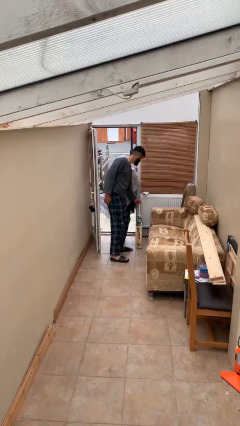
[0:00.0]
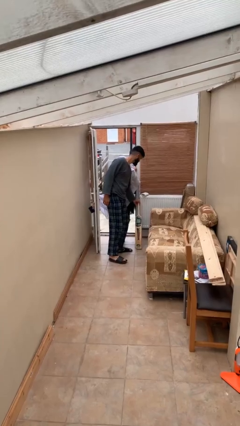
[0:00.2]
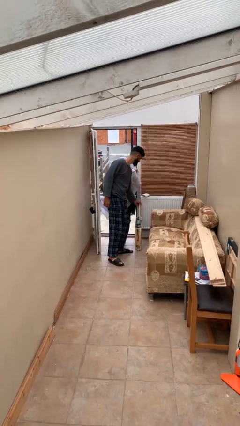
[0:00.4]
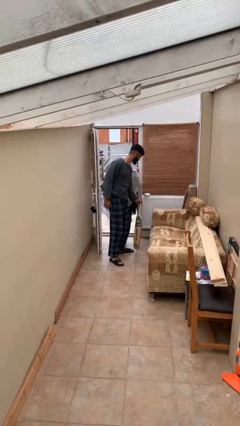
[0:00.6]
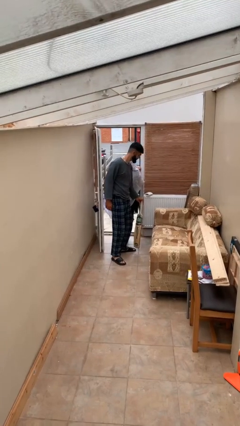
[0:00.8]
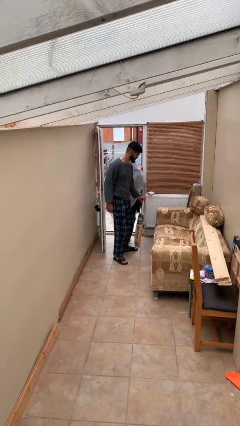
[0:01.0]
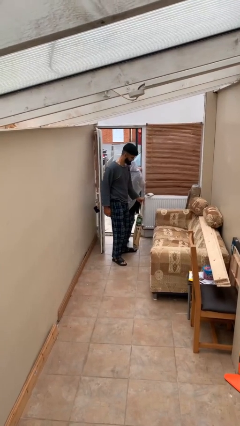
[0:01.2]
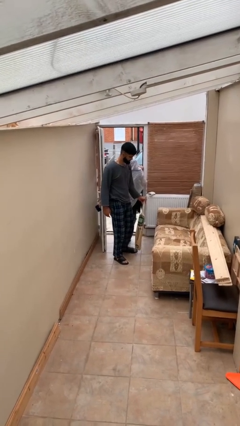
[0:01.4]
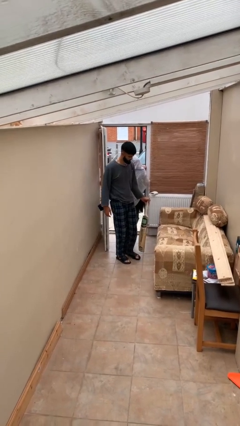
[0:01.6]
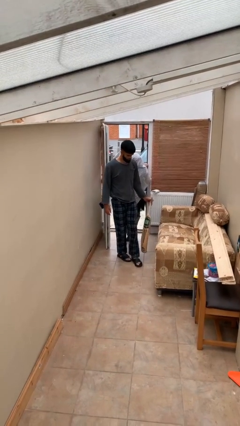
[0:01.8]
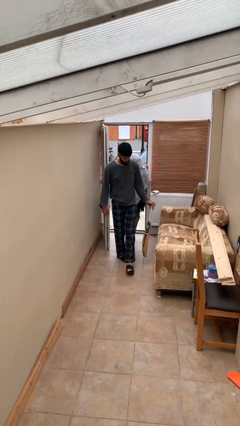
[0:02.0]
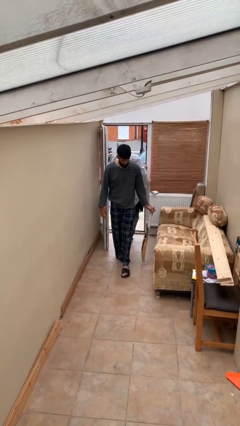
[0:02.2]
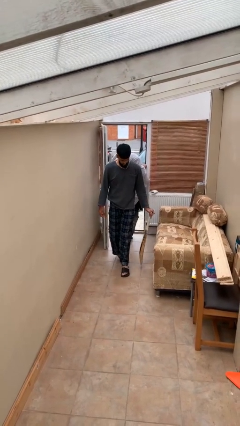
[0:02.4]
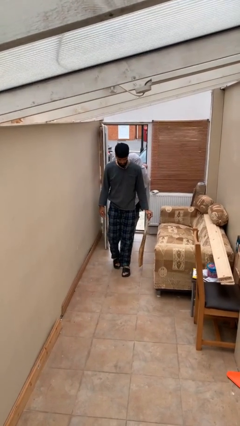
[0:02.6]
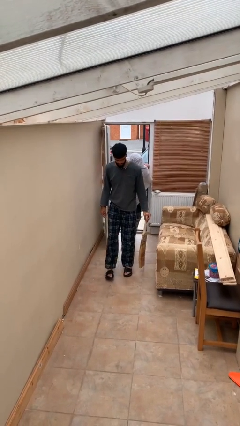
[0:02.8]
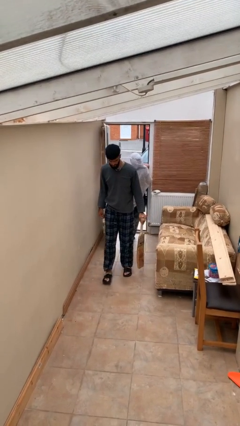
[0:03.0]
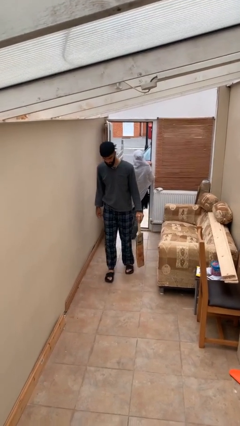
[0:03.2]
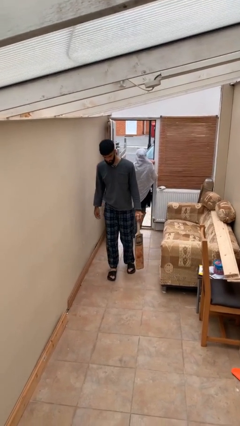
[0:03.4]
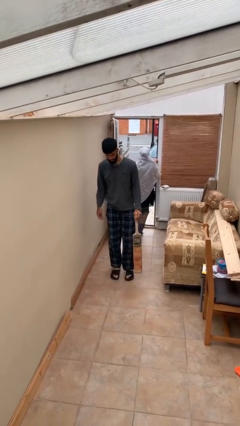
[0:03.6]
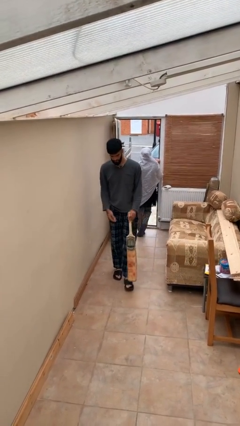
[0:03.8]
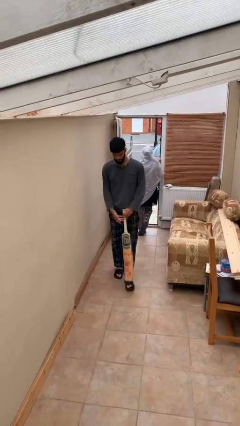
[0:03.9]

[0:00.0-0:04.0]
person steals object from person

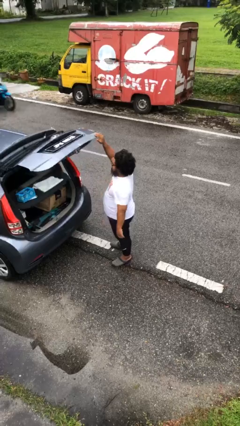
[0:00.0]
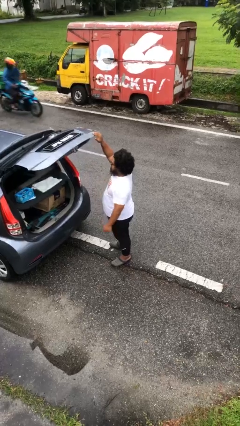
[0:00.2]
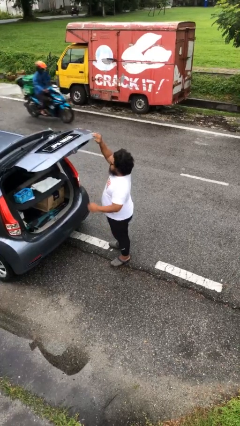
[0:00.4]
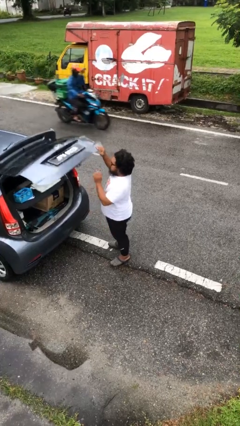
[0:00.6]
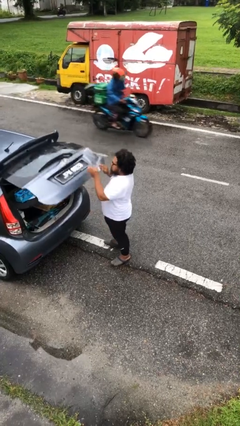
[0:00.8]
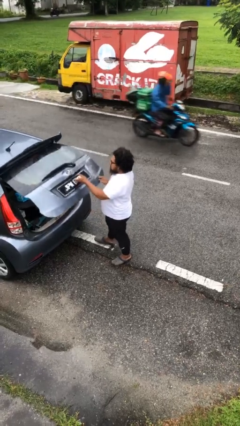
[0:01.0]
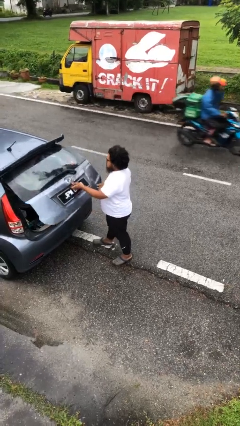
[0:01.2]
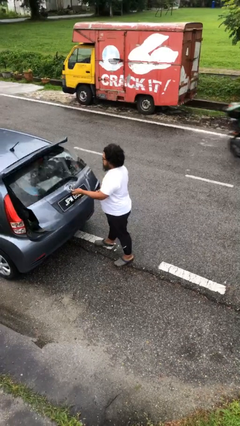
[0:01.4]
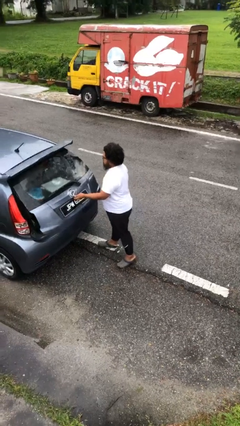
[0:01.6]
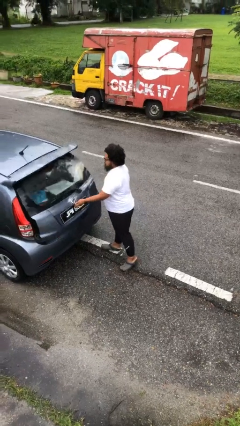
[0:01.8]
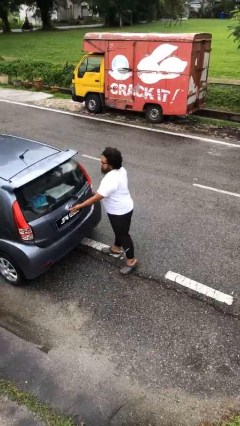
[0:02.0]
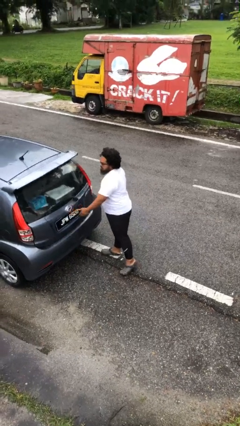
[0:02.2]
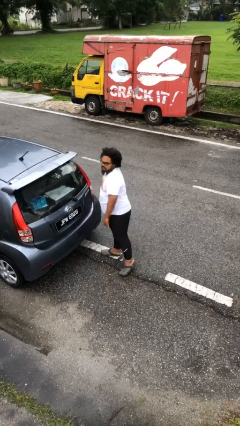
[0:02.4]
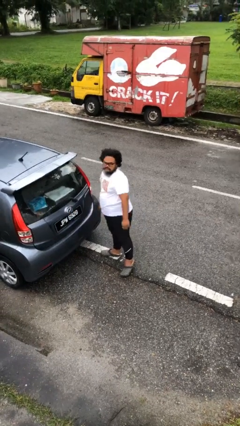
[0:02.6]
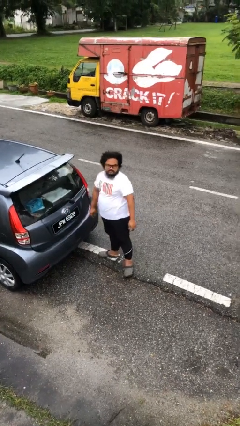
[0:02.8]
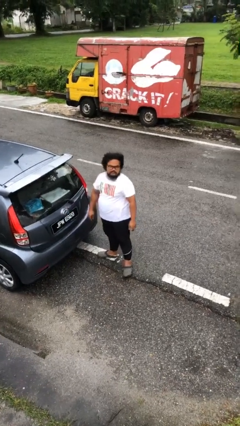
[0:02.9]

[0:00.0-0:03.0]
person closes car trunk

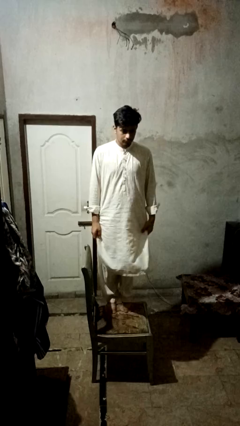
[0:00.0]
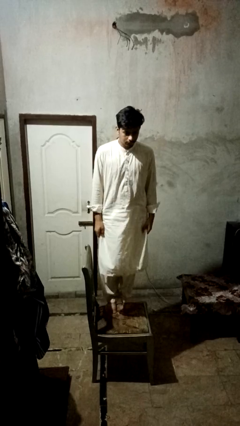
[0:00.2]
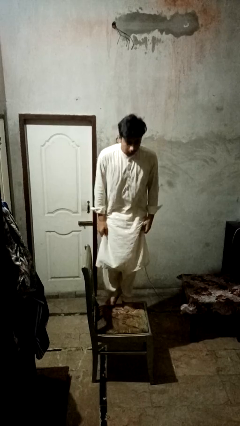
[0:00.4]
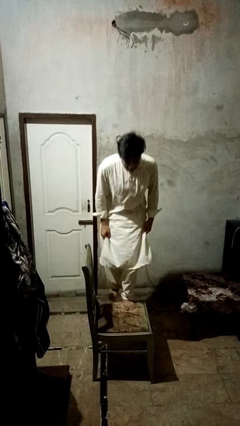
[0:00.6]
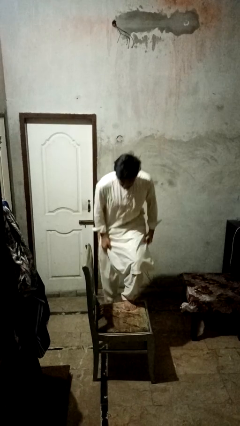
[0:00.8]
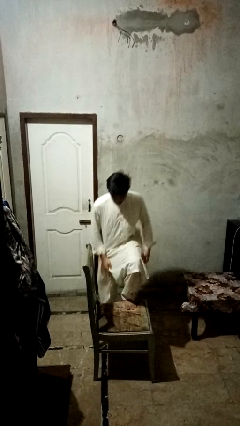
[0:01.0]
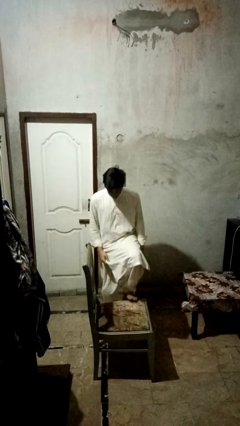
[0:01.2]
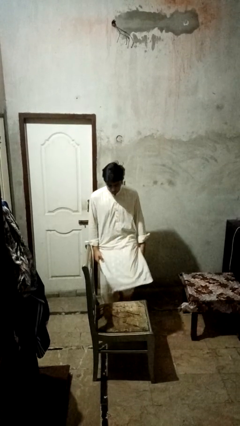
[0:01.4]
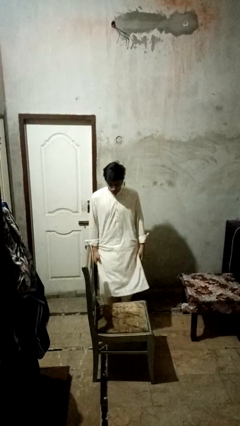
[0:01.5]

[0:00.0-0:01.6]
person climbs off chair

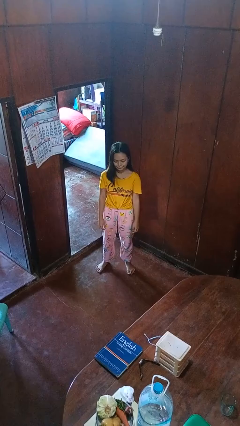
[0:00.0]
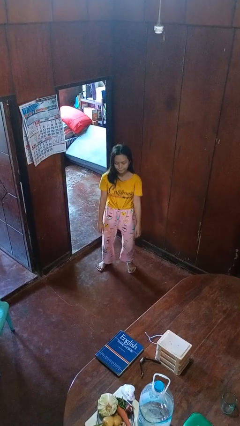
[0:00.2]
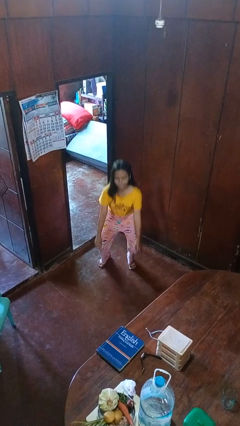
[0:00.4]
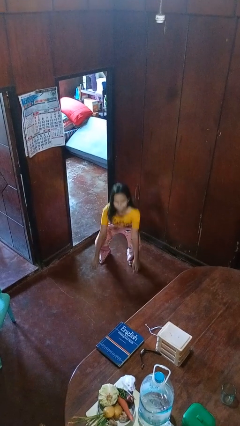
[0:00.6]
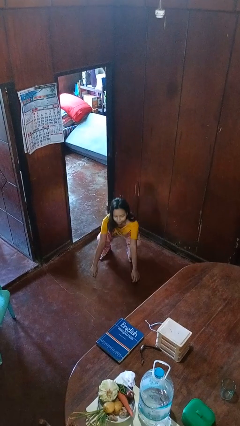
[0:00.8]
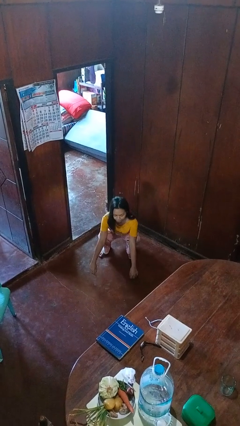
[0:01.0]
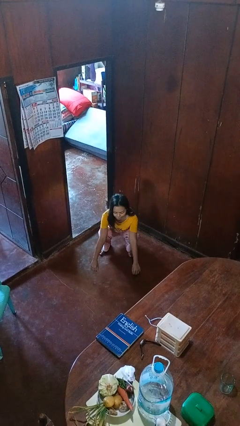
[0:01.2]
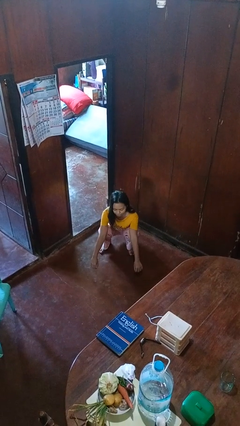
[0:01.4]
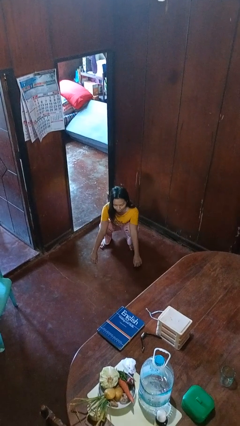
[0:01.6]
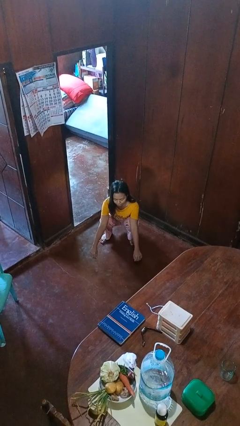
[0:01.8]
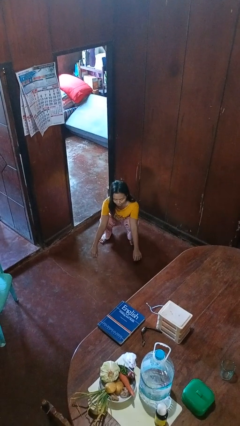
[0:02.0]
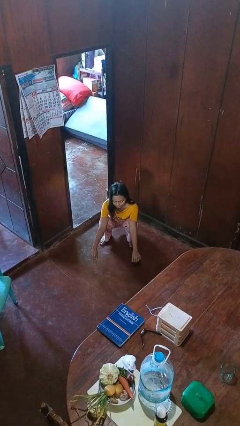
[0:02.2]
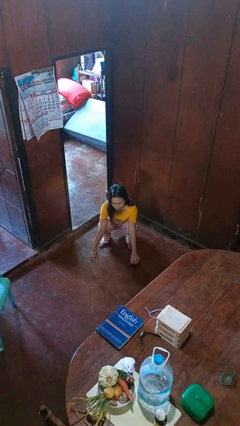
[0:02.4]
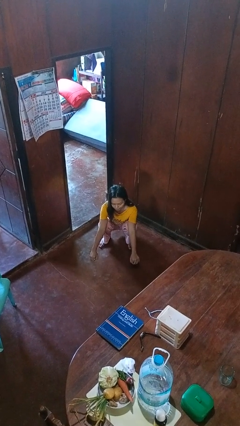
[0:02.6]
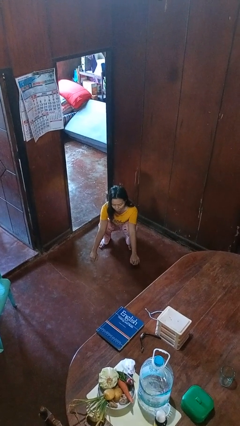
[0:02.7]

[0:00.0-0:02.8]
person squats

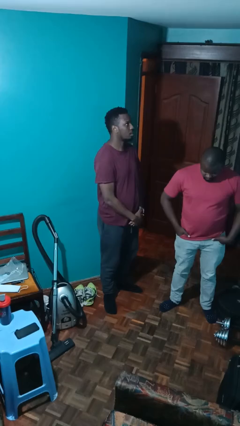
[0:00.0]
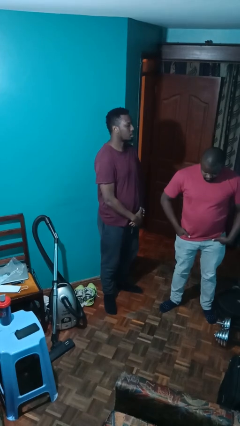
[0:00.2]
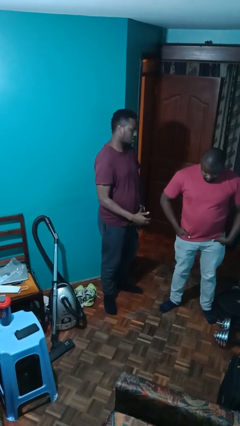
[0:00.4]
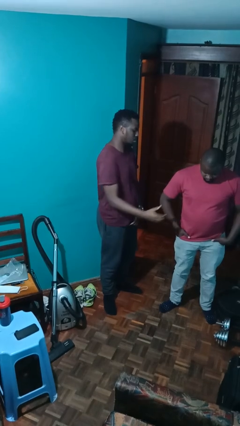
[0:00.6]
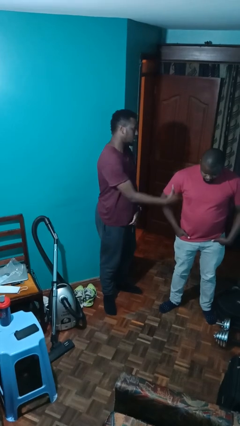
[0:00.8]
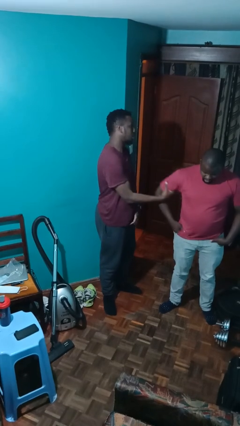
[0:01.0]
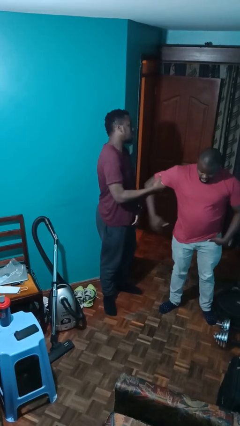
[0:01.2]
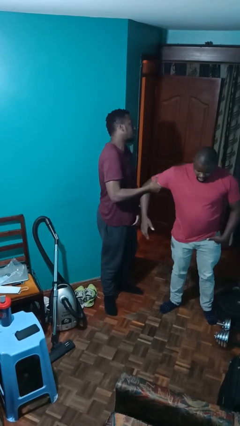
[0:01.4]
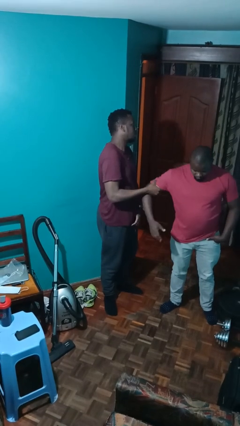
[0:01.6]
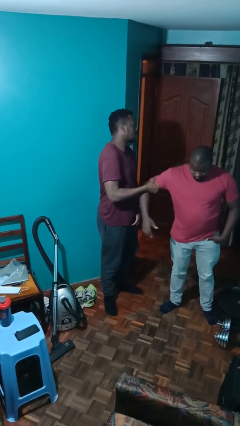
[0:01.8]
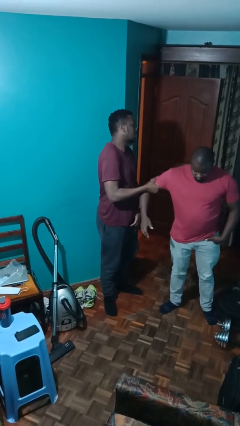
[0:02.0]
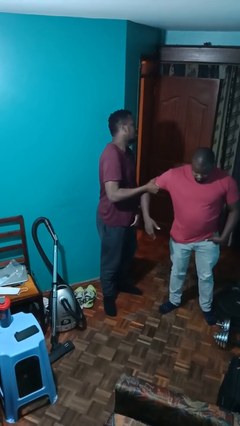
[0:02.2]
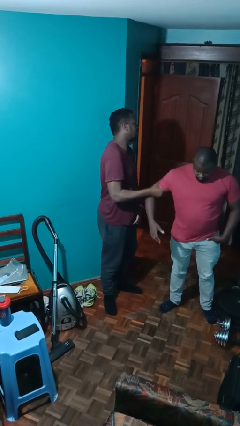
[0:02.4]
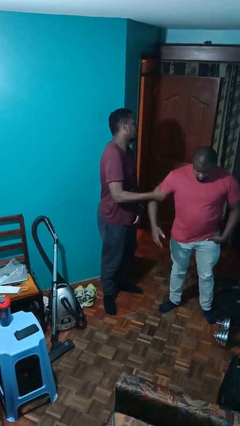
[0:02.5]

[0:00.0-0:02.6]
person grabs person by bicep

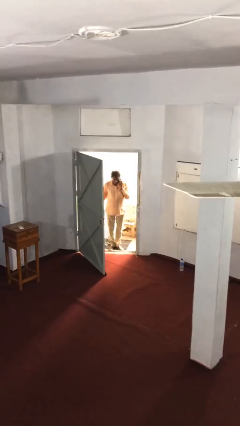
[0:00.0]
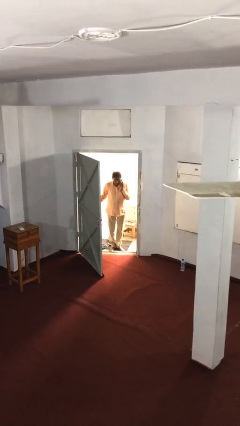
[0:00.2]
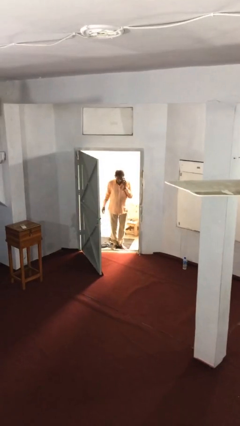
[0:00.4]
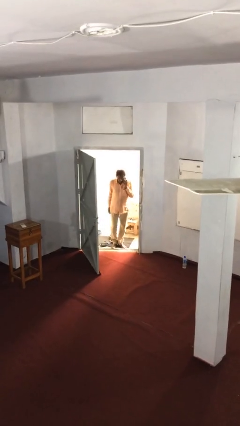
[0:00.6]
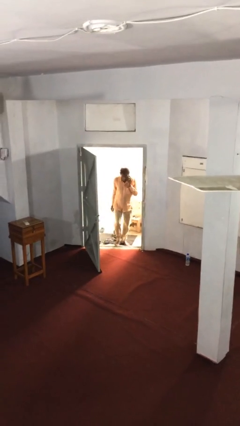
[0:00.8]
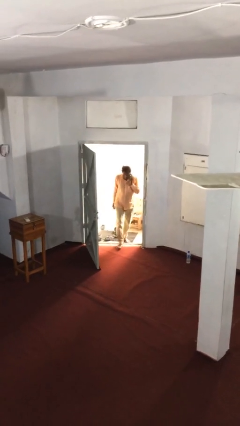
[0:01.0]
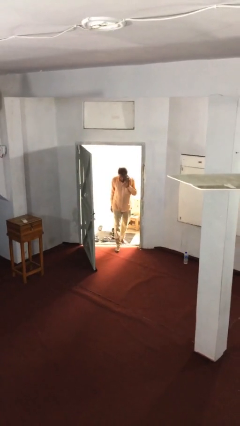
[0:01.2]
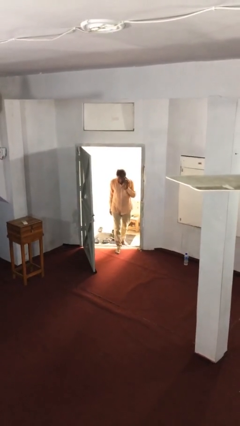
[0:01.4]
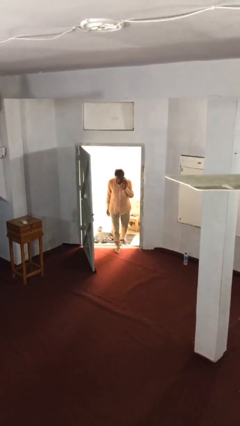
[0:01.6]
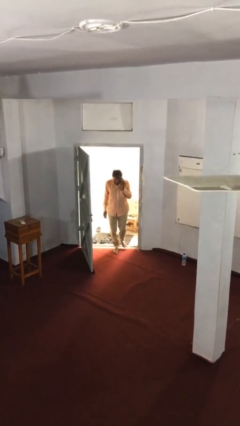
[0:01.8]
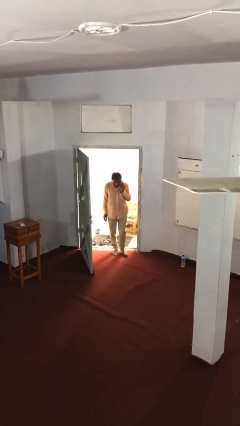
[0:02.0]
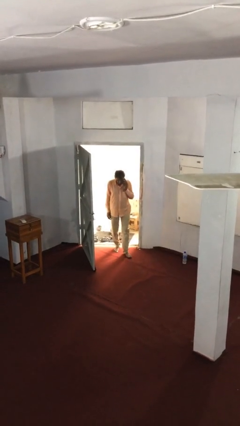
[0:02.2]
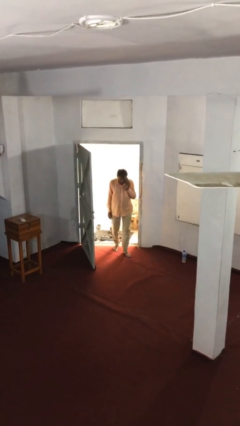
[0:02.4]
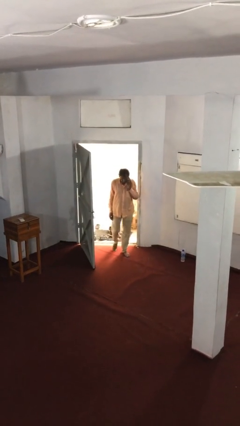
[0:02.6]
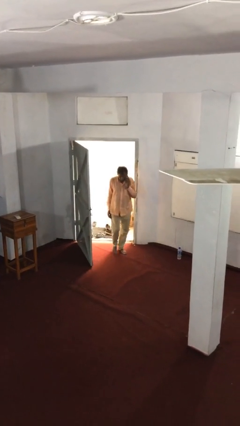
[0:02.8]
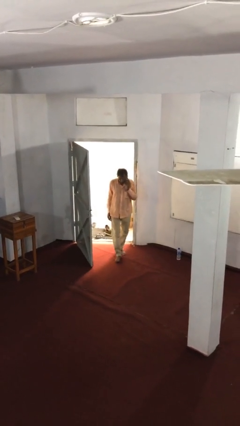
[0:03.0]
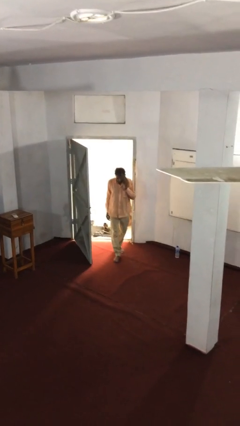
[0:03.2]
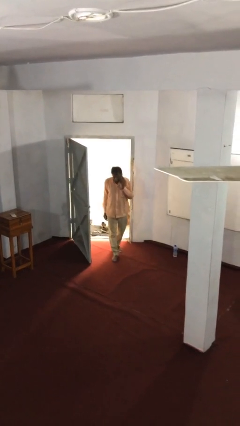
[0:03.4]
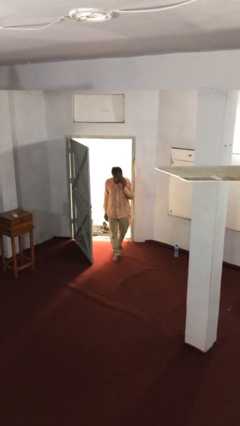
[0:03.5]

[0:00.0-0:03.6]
person enters scene through structure
